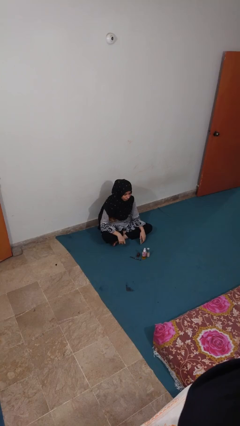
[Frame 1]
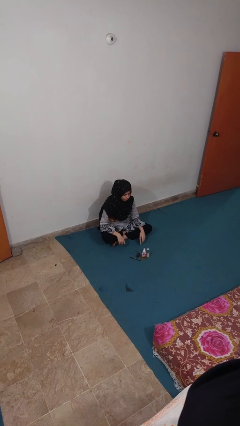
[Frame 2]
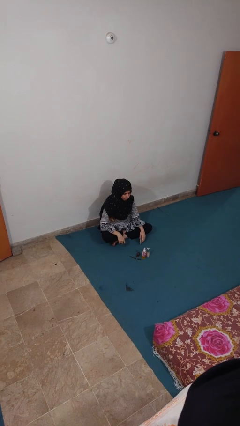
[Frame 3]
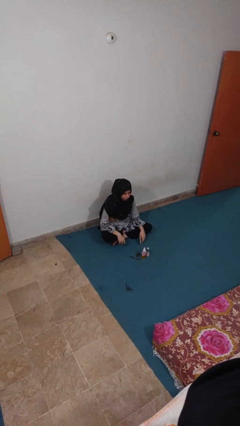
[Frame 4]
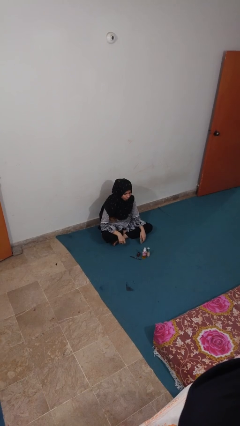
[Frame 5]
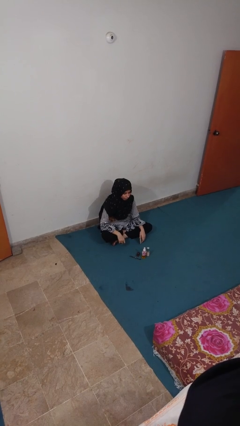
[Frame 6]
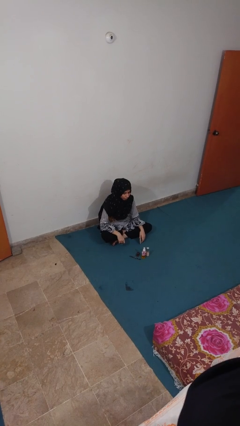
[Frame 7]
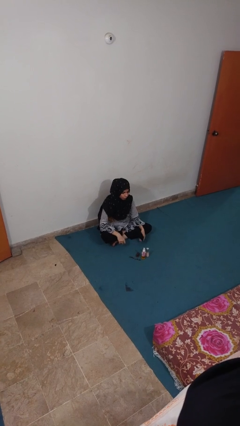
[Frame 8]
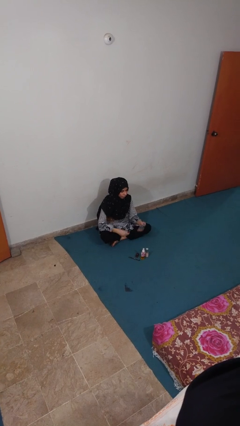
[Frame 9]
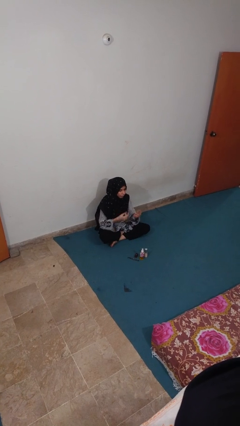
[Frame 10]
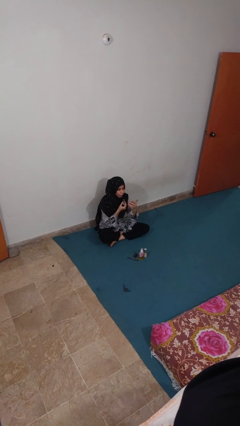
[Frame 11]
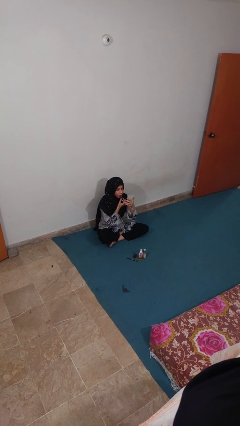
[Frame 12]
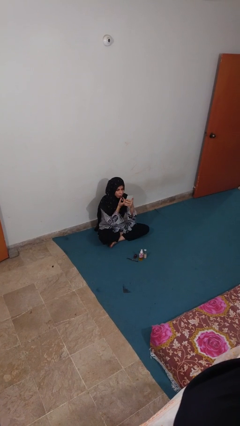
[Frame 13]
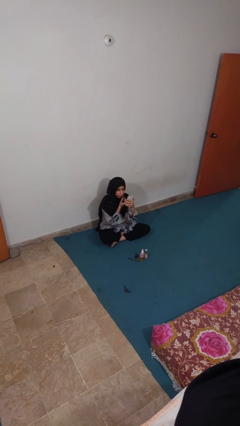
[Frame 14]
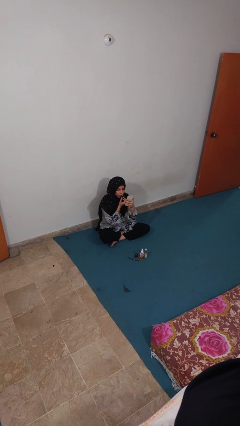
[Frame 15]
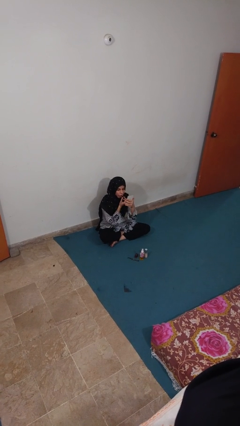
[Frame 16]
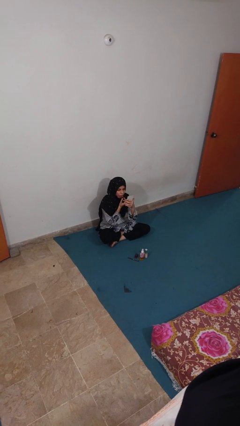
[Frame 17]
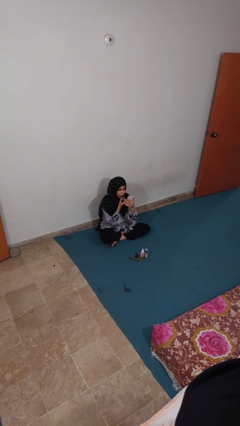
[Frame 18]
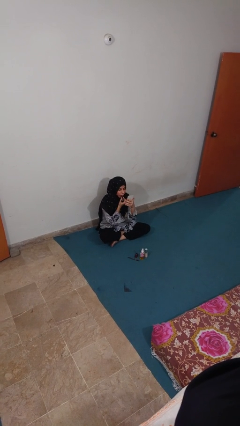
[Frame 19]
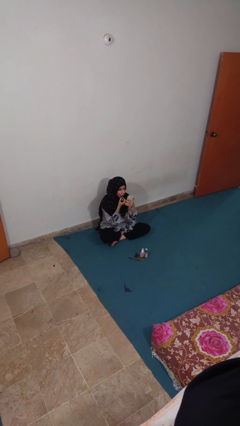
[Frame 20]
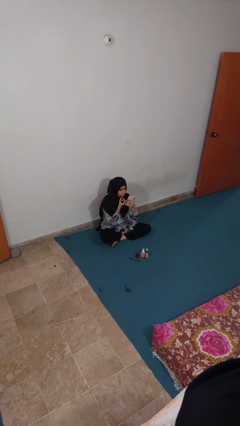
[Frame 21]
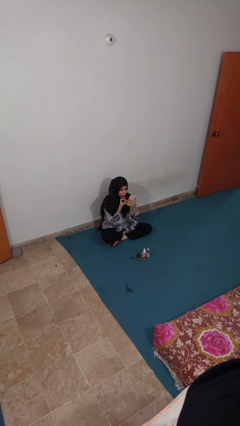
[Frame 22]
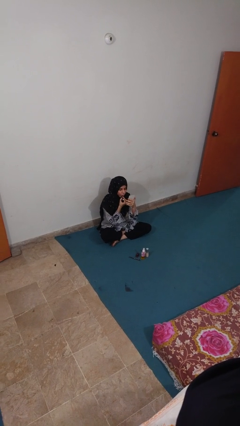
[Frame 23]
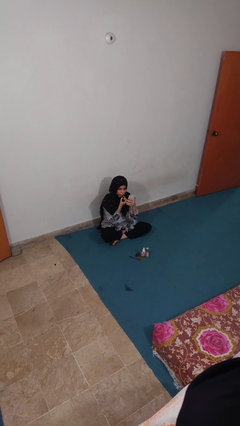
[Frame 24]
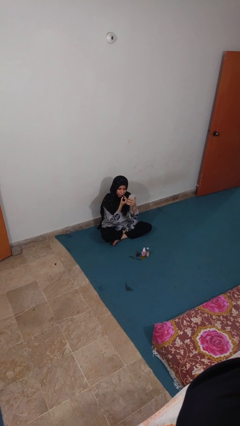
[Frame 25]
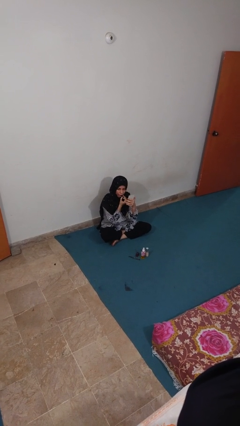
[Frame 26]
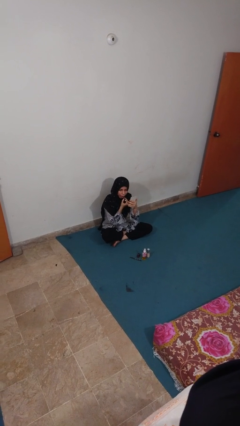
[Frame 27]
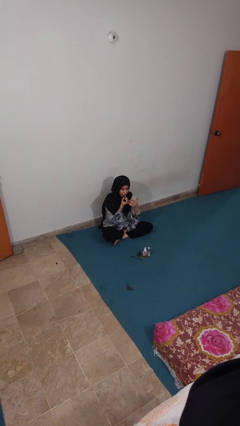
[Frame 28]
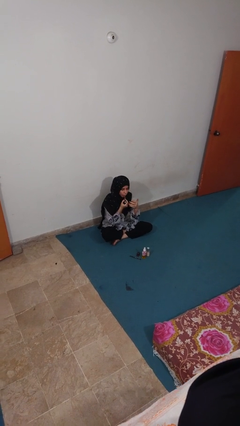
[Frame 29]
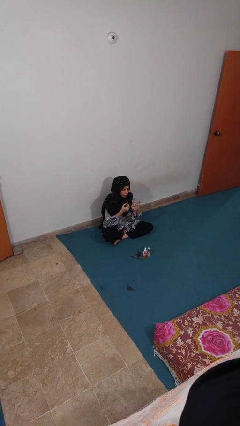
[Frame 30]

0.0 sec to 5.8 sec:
person applies lip makeup

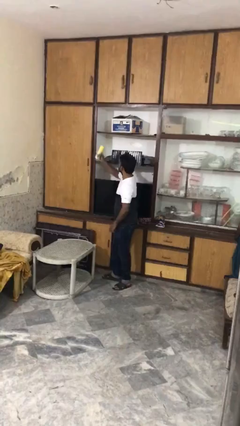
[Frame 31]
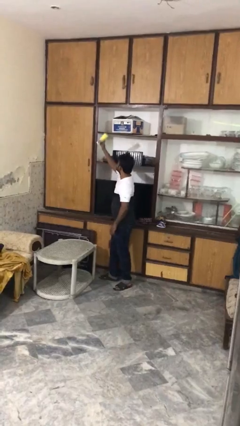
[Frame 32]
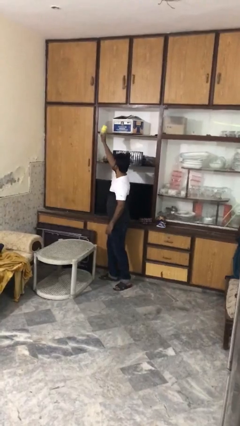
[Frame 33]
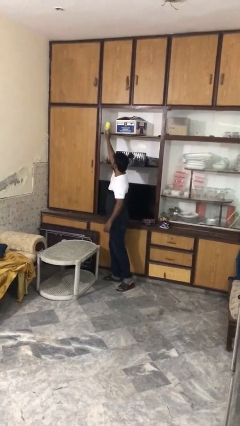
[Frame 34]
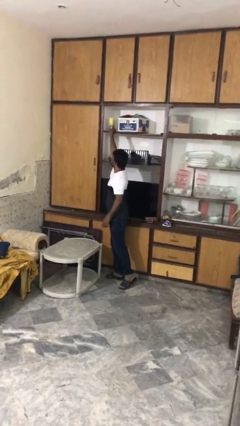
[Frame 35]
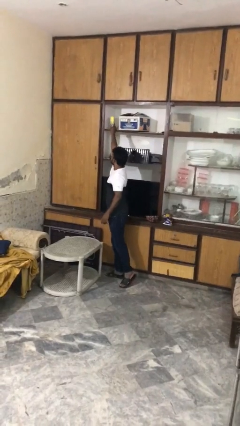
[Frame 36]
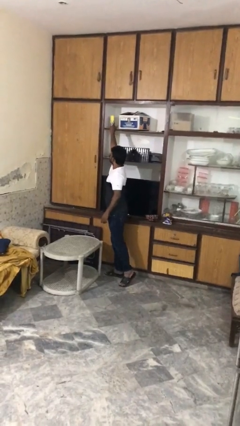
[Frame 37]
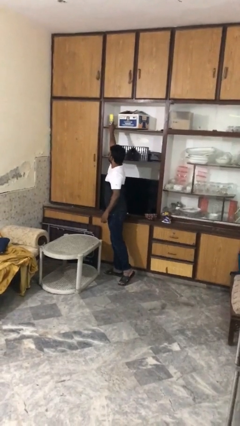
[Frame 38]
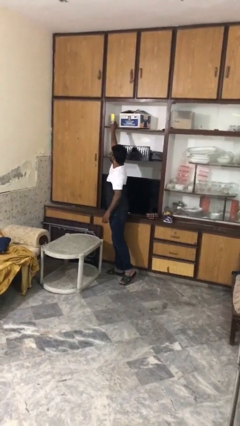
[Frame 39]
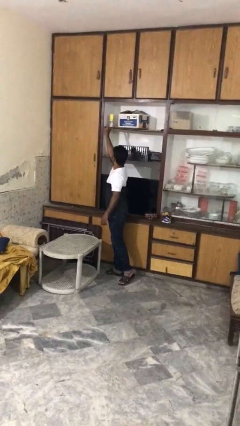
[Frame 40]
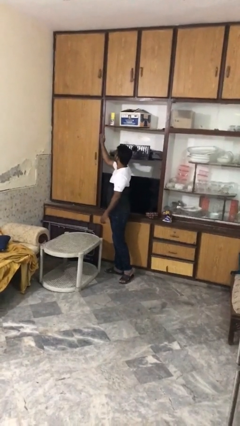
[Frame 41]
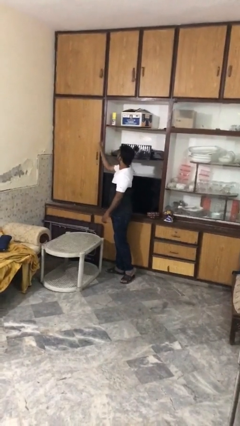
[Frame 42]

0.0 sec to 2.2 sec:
person puts down object on shelf

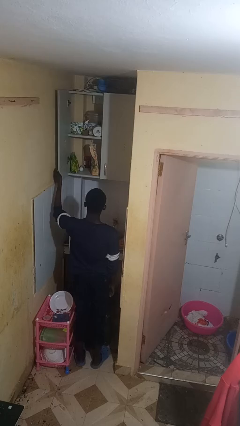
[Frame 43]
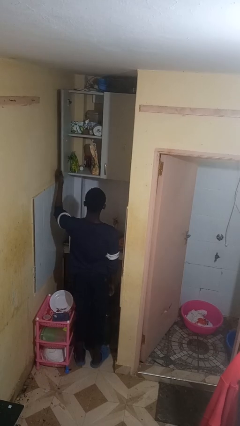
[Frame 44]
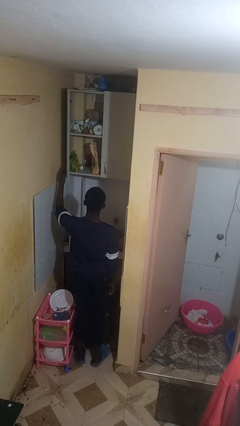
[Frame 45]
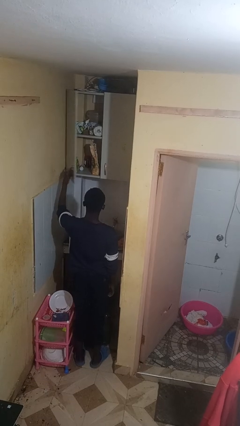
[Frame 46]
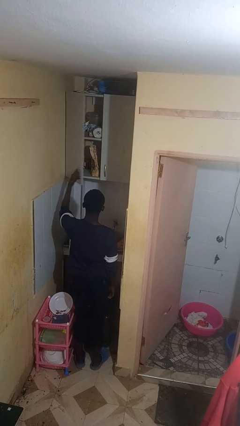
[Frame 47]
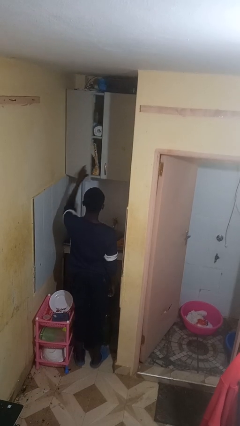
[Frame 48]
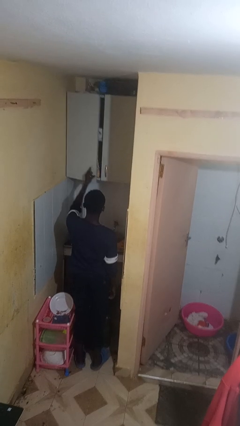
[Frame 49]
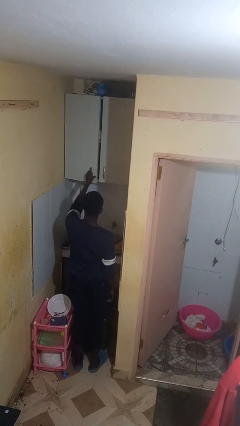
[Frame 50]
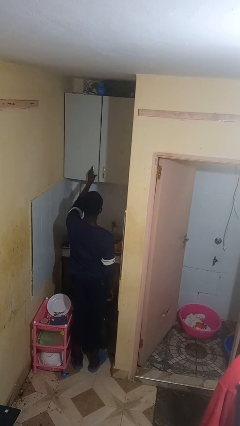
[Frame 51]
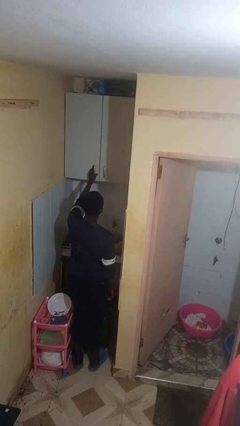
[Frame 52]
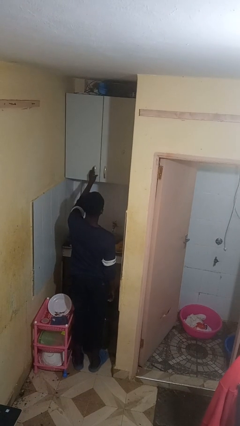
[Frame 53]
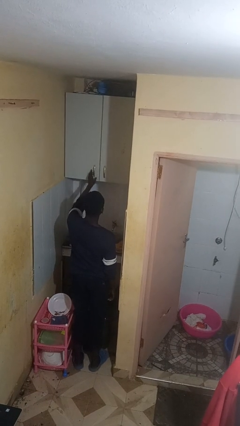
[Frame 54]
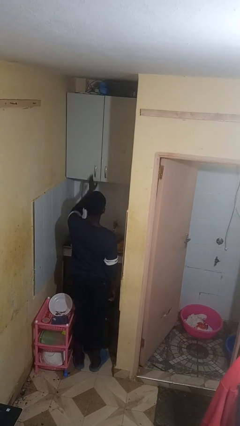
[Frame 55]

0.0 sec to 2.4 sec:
person closes cabinet

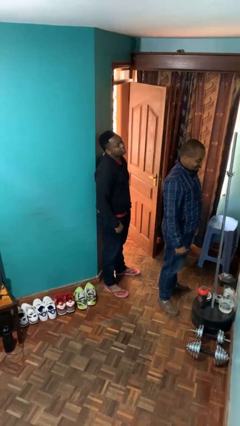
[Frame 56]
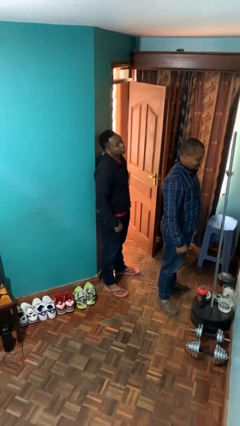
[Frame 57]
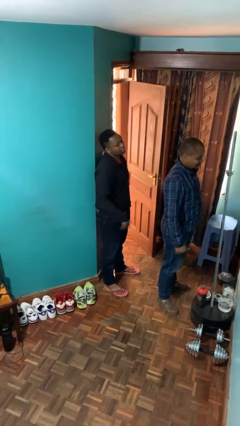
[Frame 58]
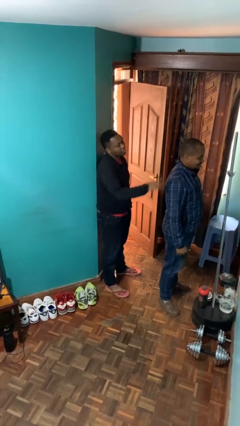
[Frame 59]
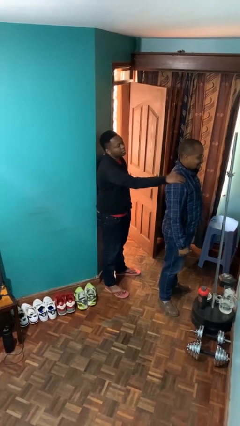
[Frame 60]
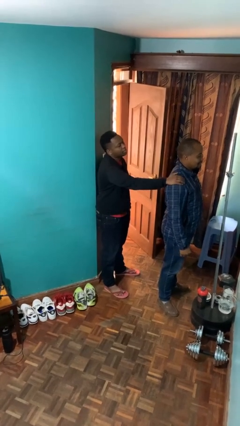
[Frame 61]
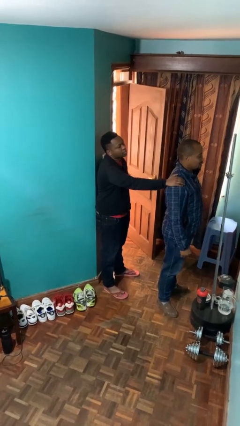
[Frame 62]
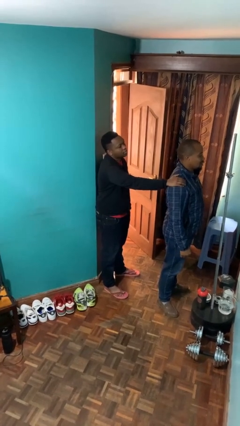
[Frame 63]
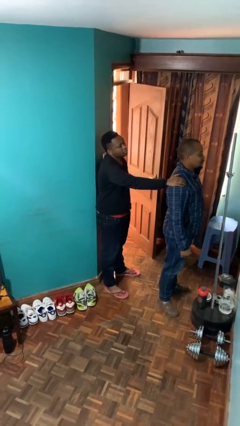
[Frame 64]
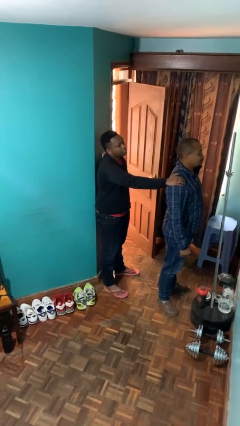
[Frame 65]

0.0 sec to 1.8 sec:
person grabs person by shoulder

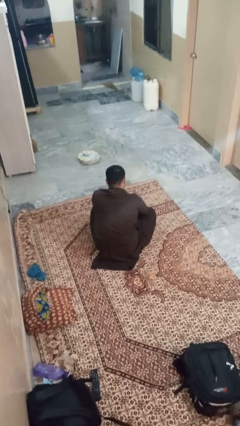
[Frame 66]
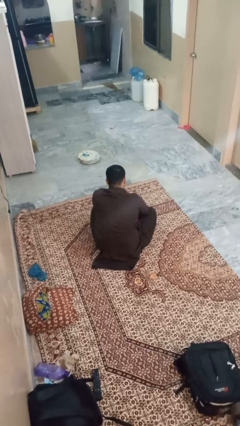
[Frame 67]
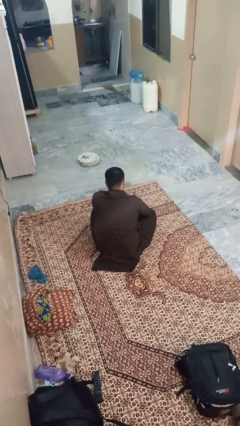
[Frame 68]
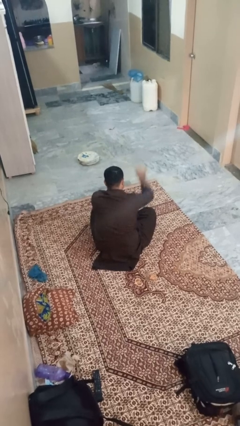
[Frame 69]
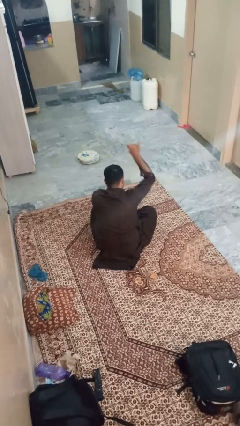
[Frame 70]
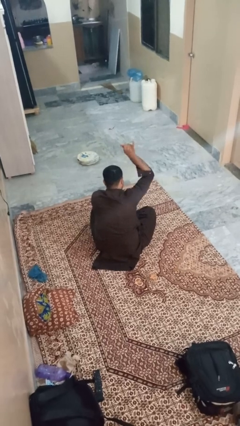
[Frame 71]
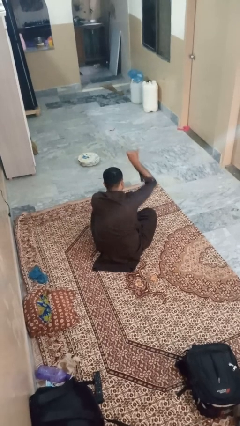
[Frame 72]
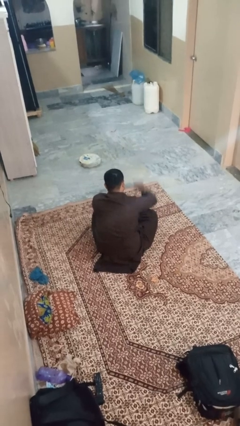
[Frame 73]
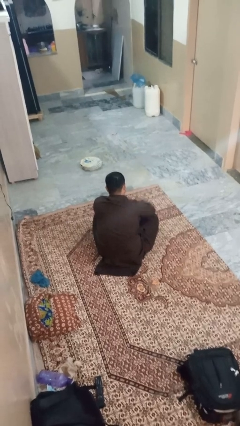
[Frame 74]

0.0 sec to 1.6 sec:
person gestures hang loose

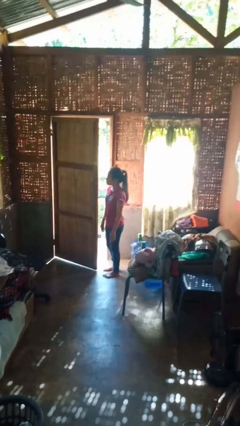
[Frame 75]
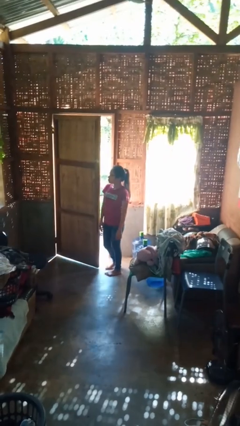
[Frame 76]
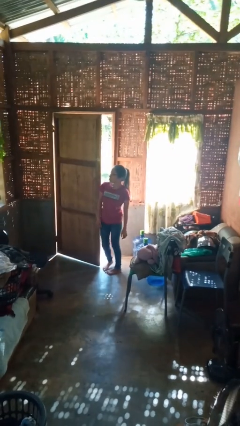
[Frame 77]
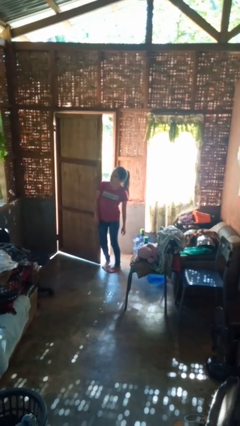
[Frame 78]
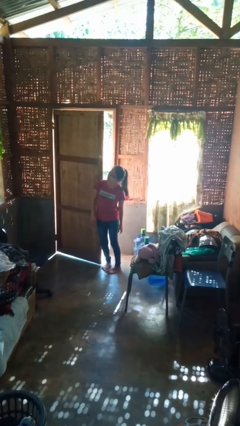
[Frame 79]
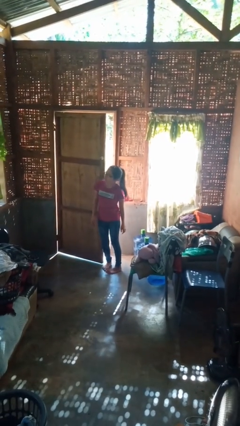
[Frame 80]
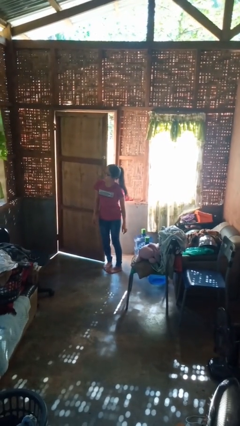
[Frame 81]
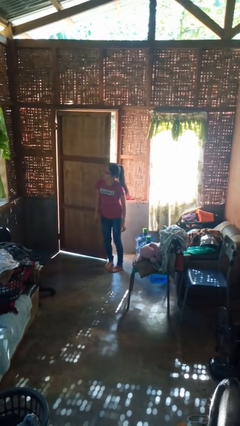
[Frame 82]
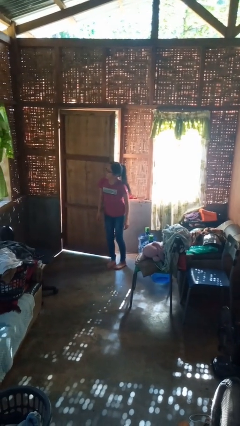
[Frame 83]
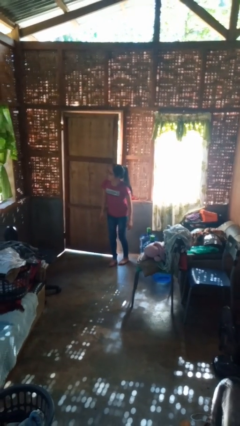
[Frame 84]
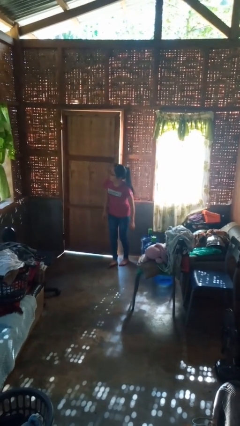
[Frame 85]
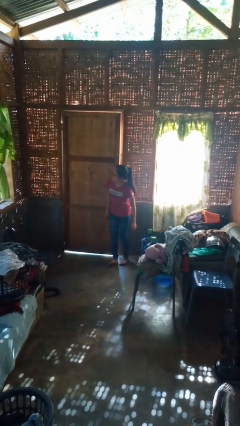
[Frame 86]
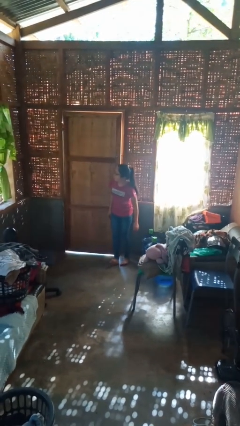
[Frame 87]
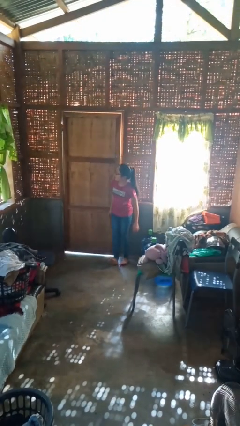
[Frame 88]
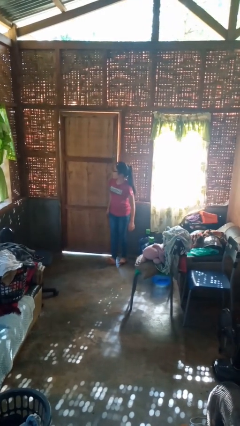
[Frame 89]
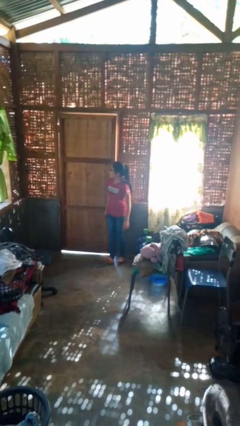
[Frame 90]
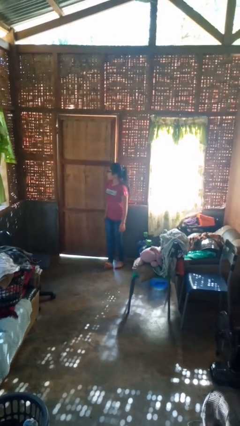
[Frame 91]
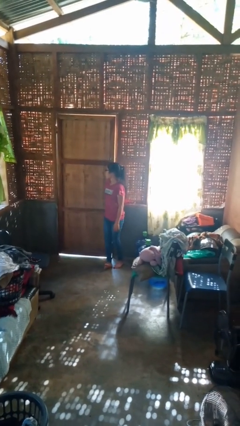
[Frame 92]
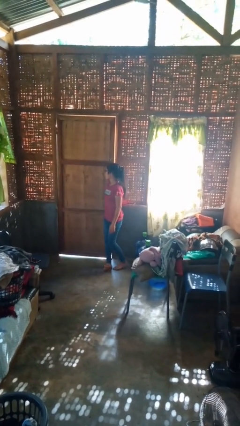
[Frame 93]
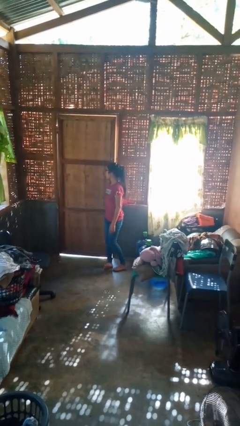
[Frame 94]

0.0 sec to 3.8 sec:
person closes door with hip
